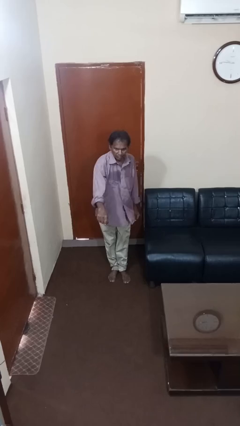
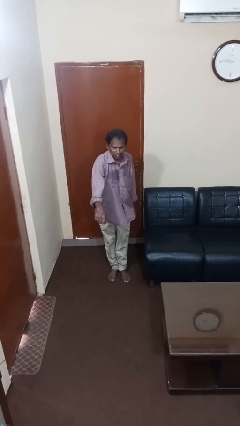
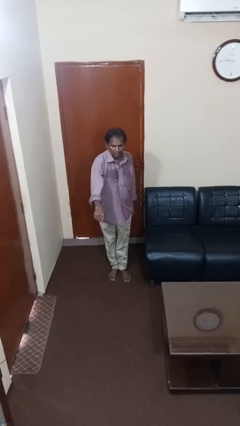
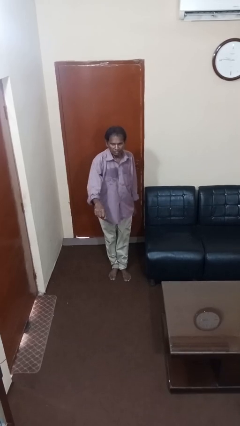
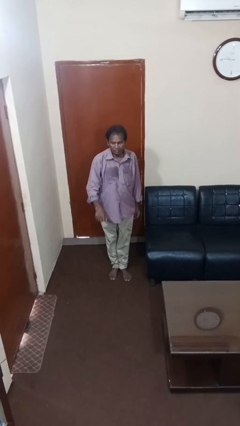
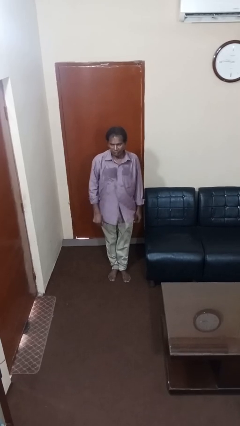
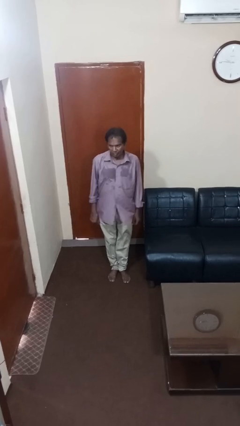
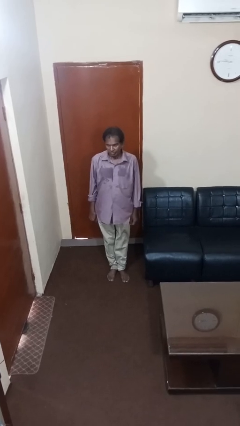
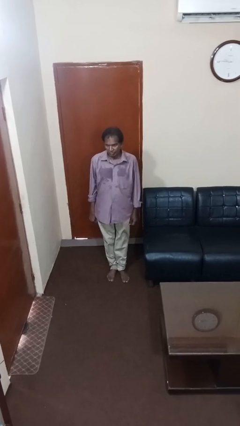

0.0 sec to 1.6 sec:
person karate chop

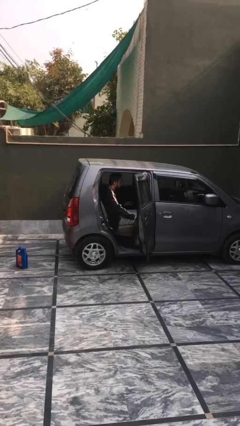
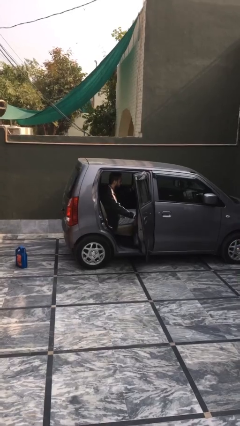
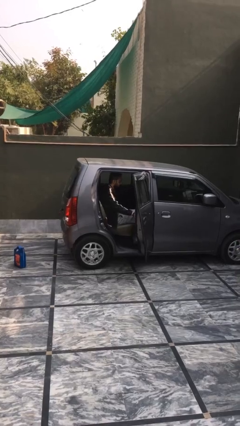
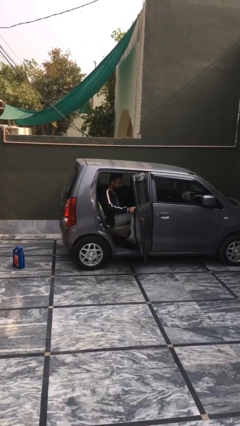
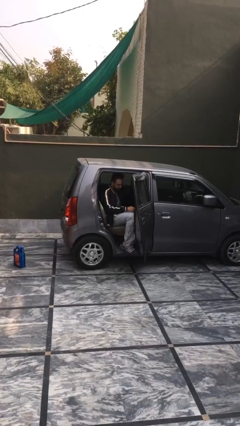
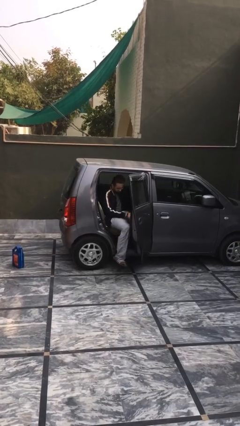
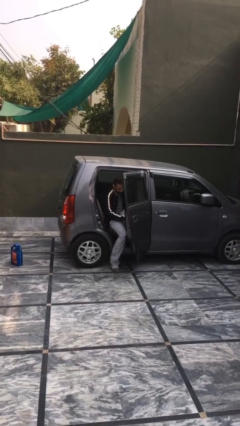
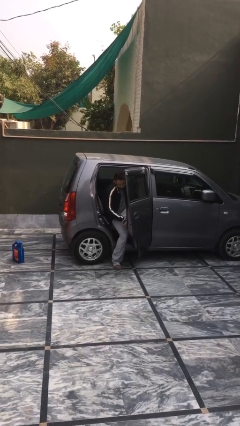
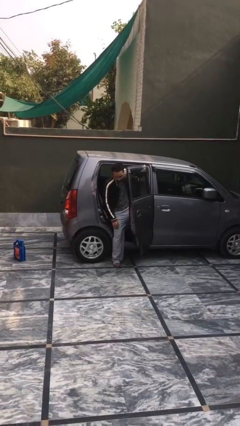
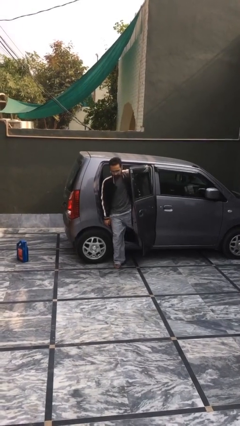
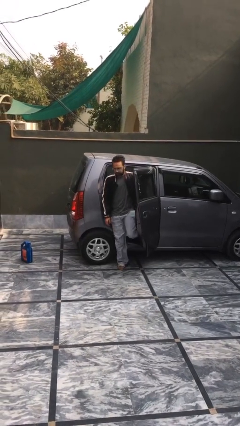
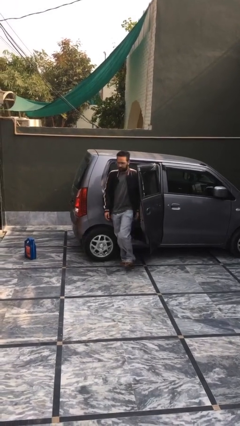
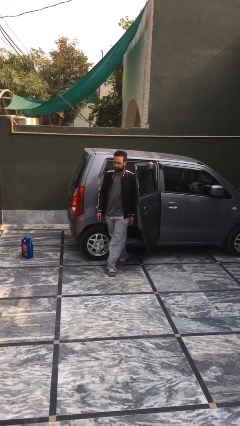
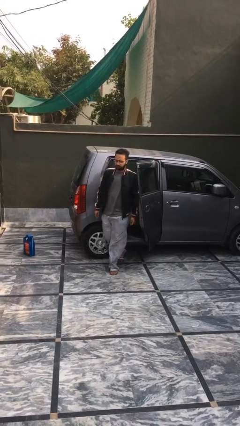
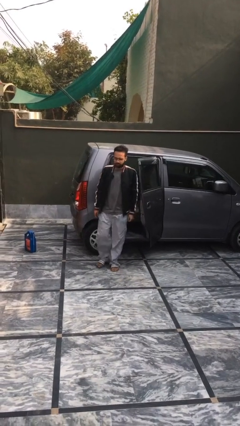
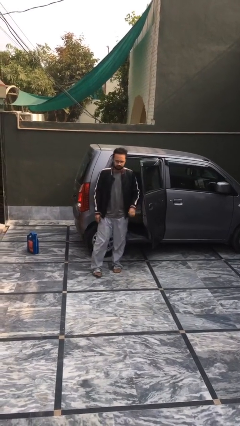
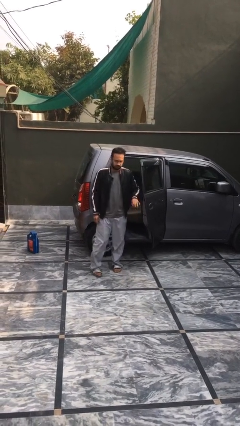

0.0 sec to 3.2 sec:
person exits car

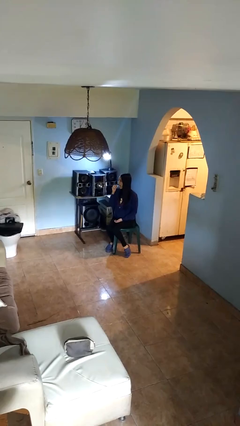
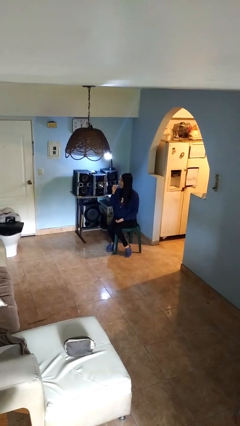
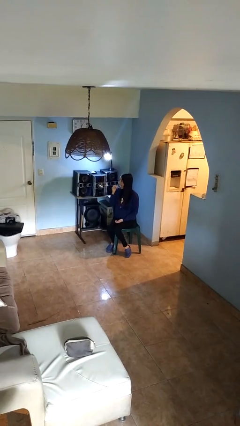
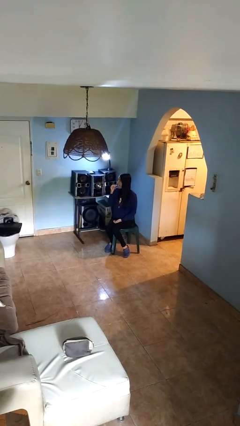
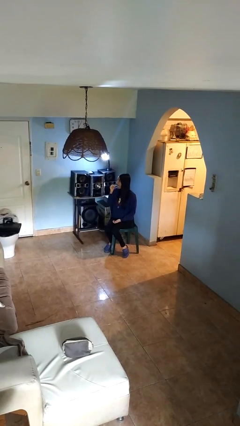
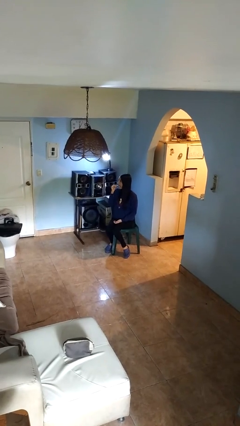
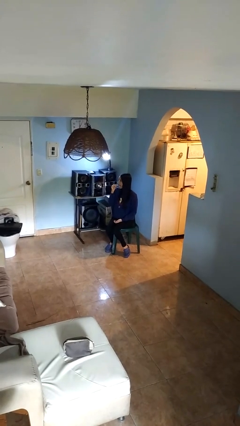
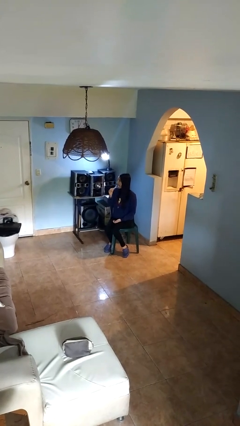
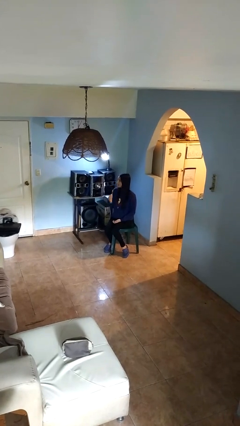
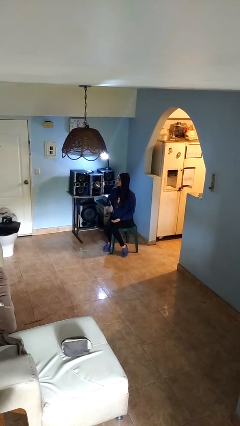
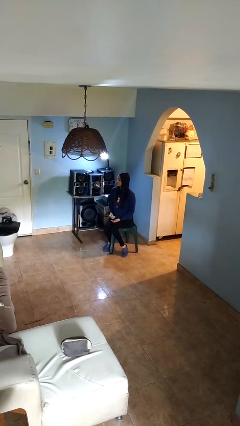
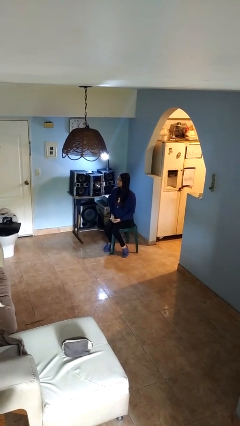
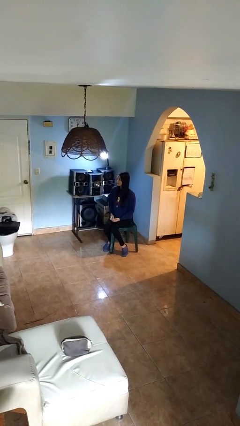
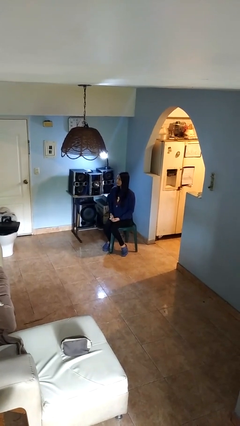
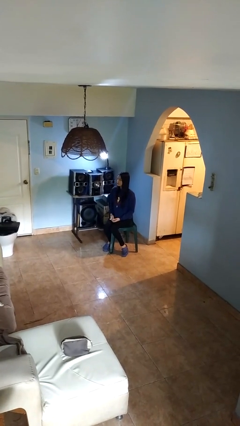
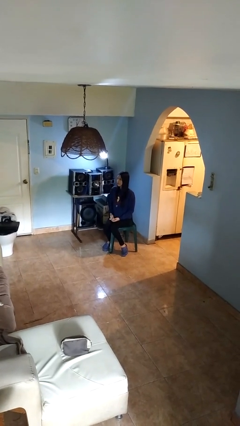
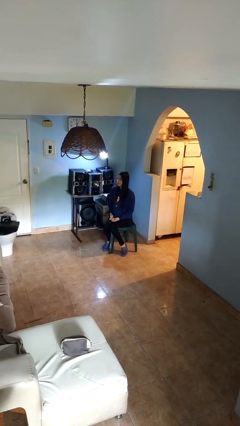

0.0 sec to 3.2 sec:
person brushes teeth

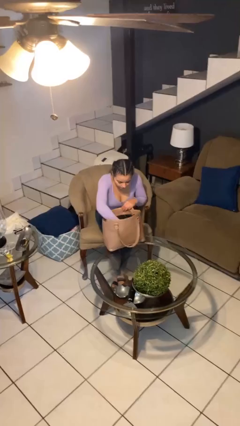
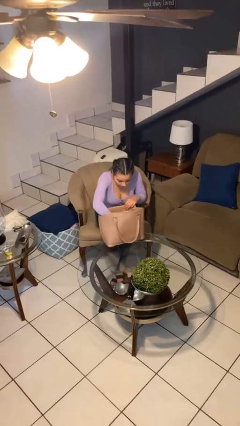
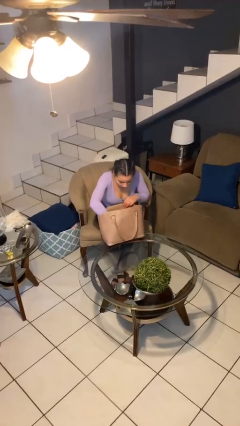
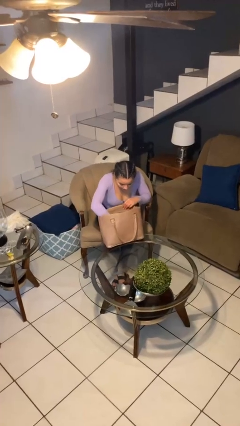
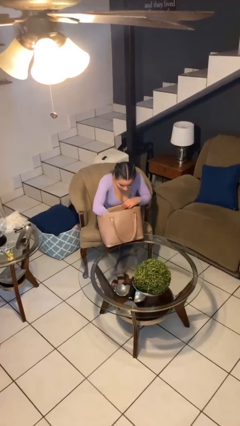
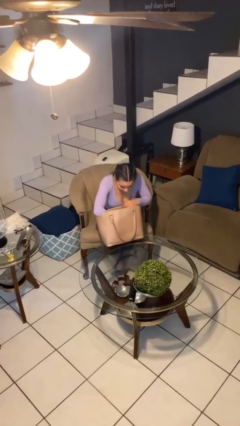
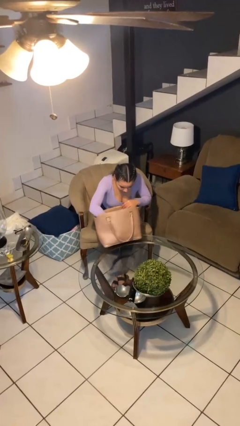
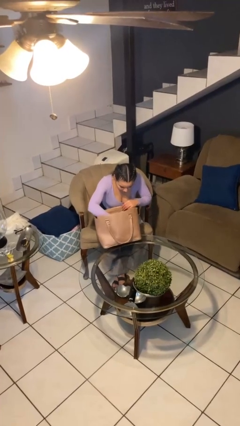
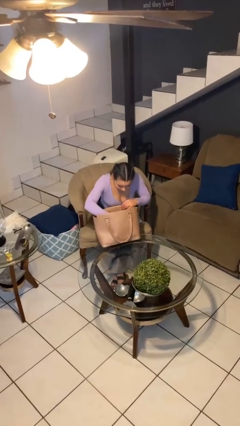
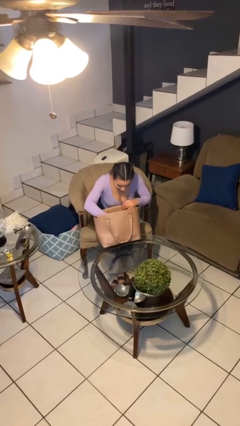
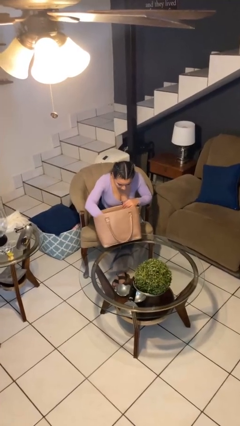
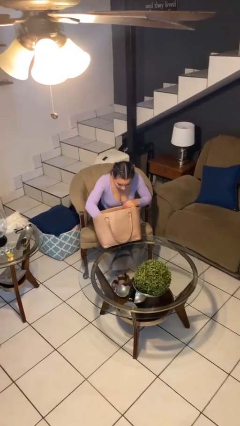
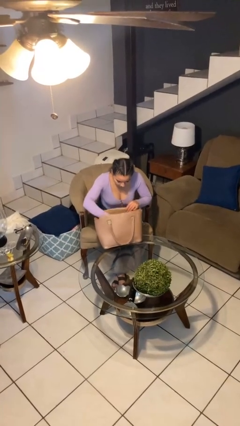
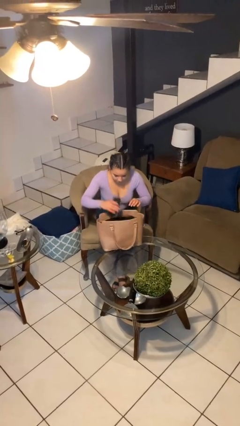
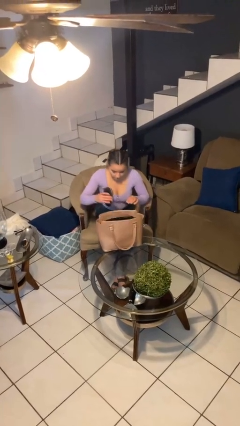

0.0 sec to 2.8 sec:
person searches in purse

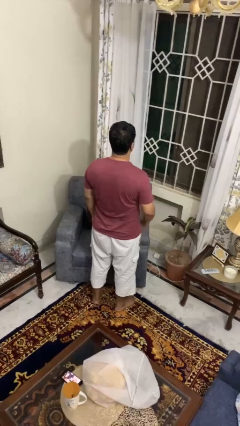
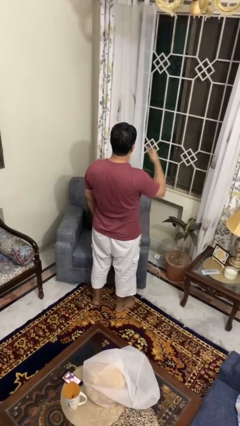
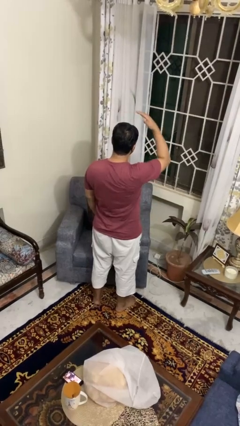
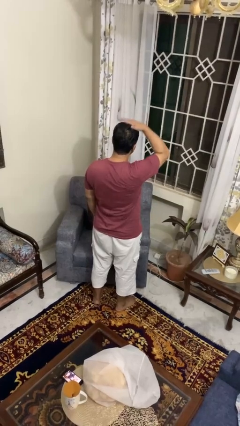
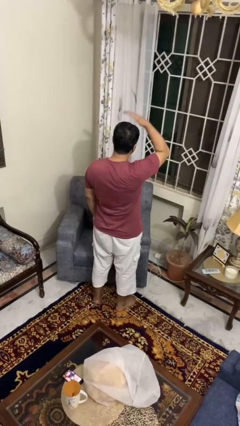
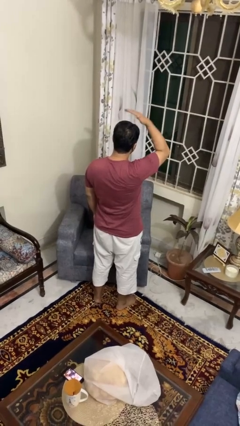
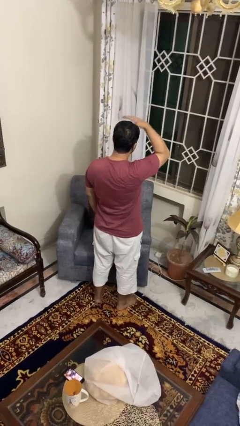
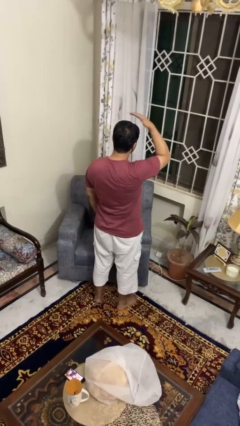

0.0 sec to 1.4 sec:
person pats head

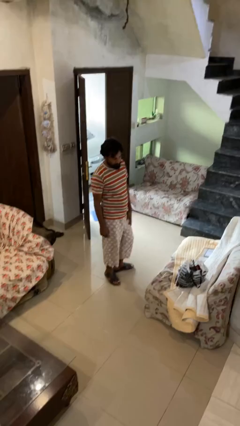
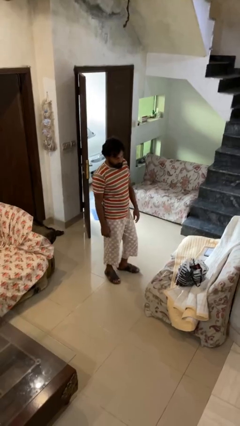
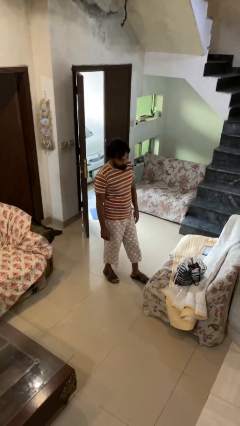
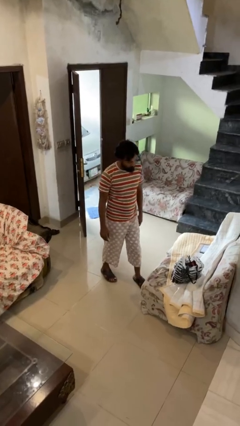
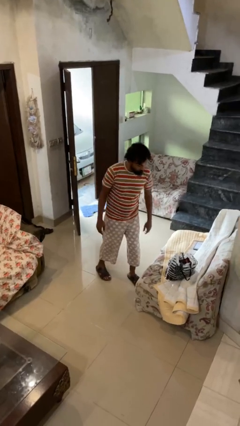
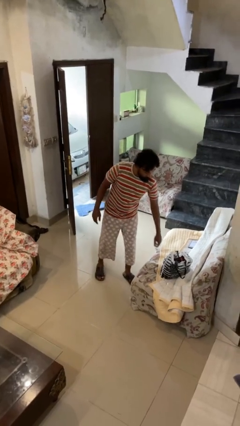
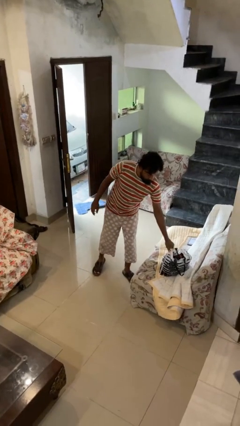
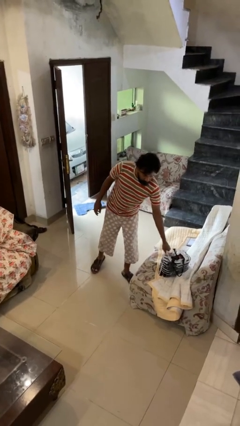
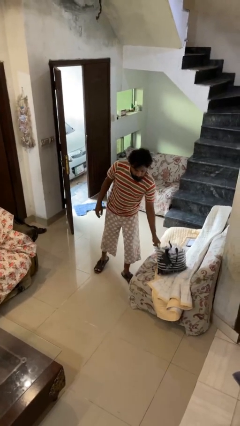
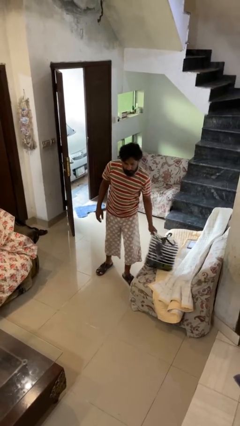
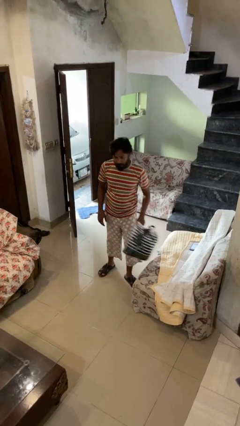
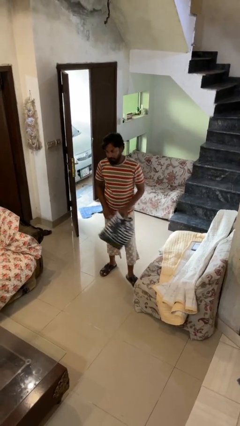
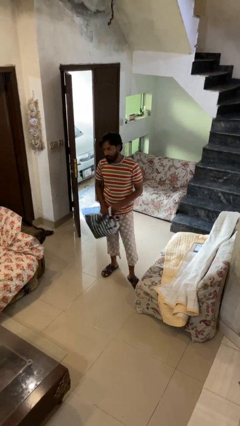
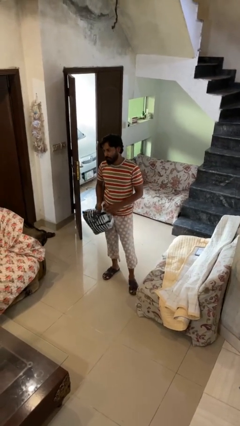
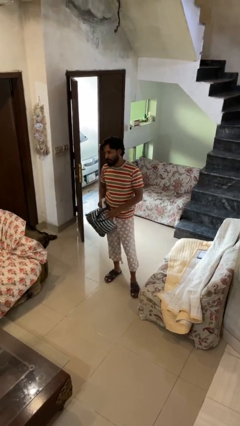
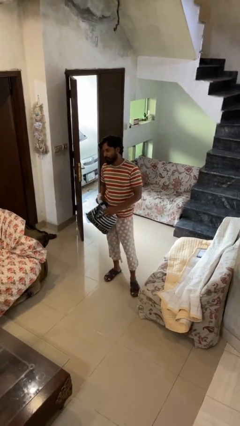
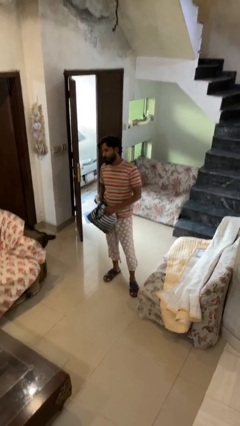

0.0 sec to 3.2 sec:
person picks up object from couch

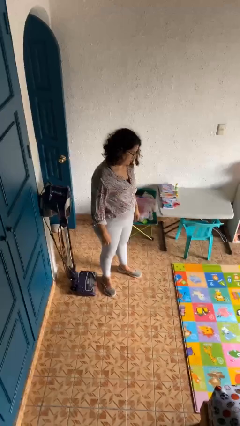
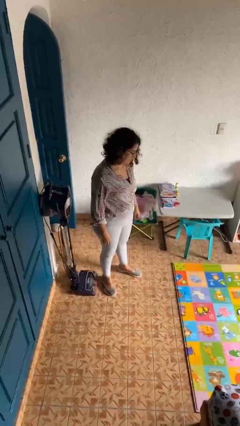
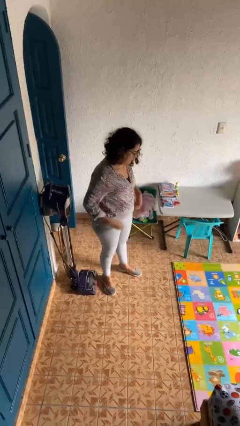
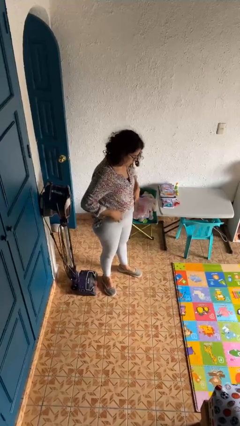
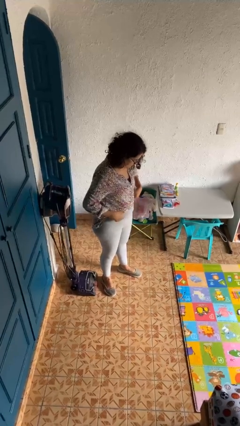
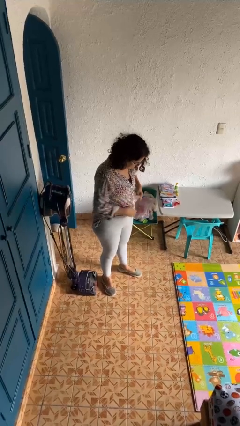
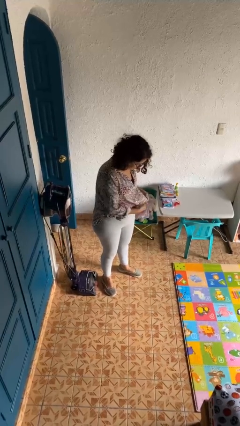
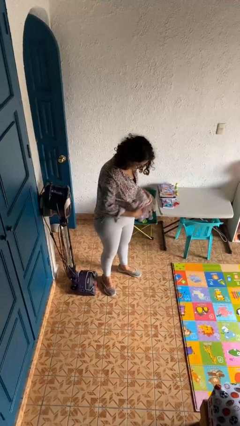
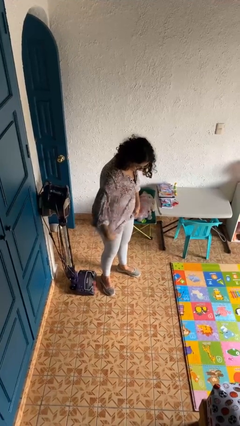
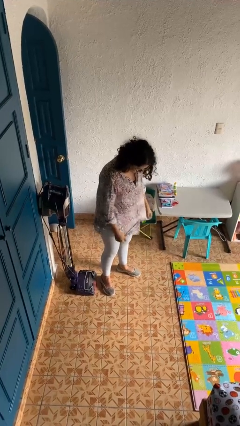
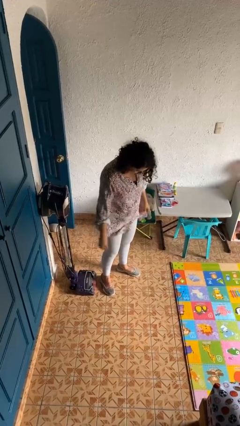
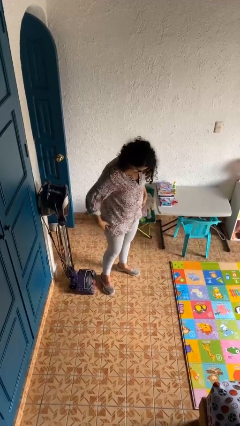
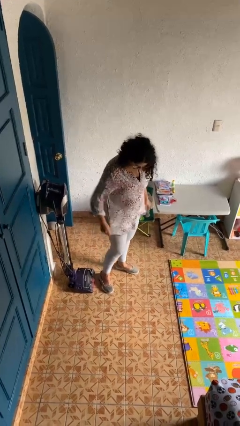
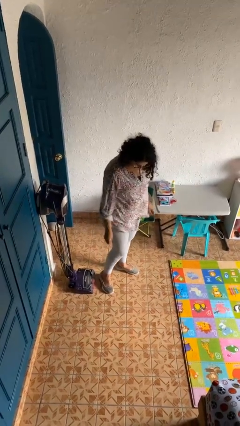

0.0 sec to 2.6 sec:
person untucks shirt
